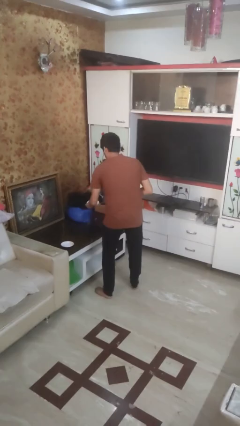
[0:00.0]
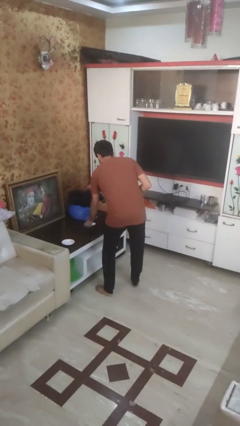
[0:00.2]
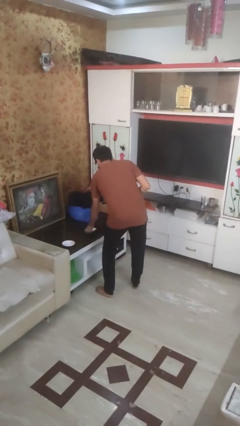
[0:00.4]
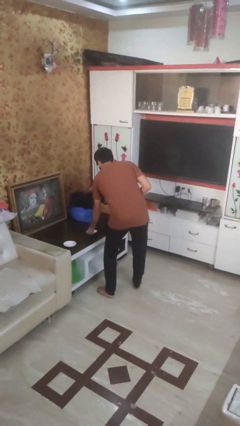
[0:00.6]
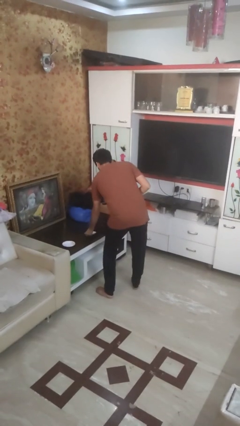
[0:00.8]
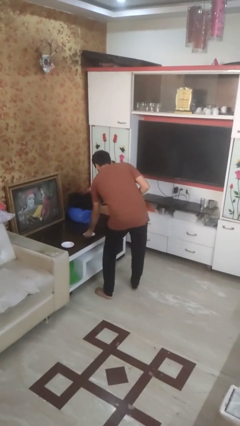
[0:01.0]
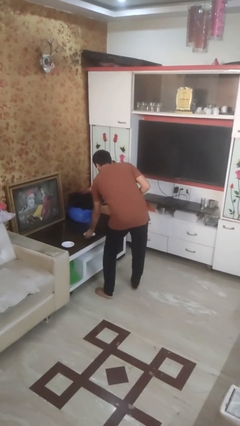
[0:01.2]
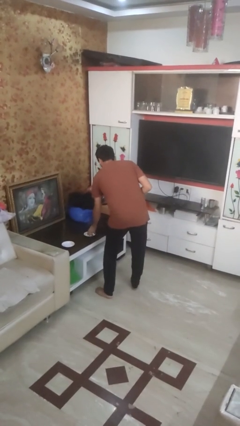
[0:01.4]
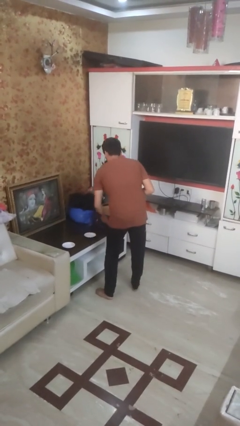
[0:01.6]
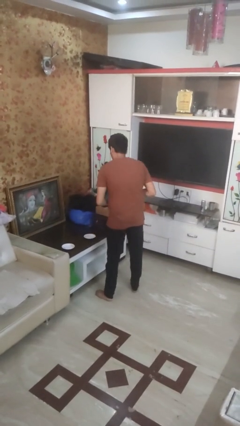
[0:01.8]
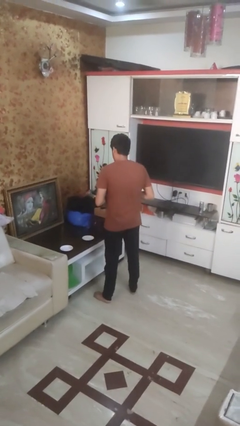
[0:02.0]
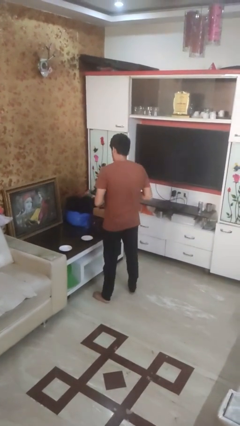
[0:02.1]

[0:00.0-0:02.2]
person sets table

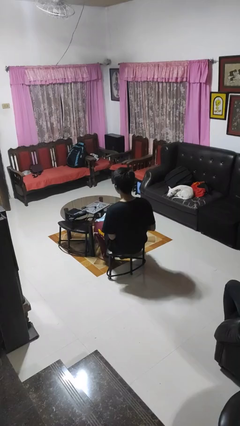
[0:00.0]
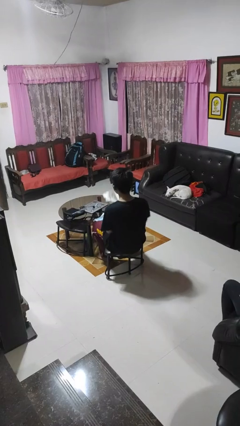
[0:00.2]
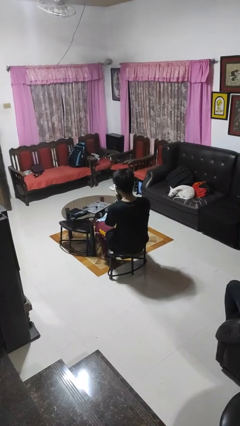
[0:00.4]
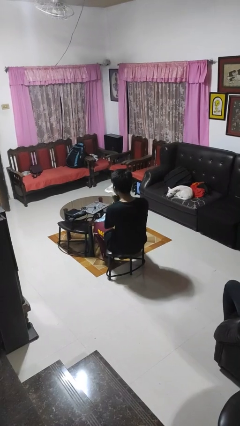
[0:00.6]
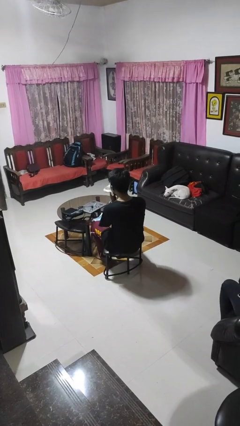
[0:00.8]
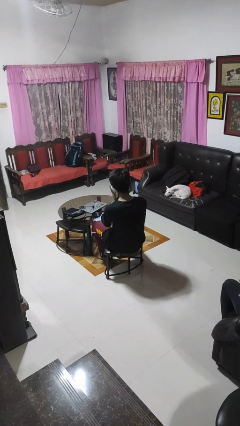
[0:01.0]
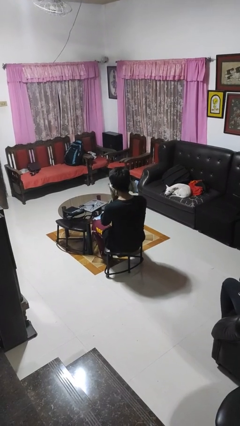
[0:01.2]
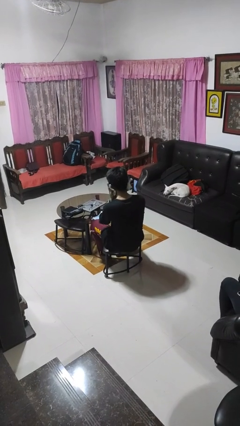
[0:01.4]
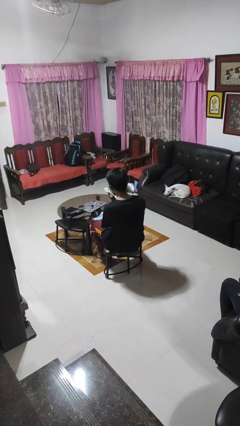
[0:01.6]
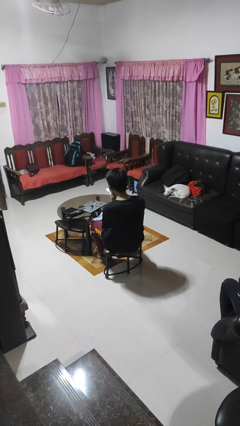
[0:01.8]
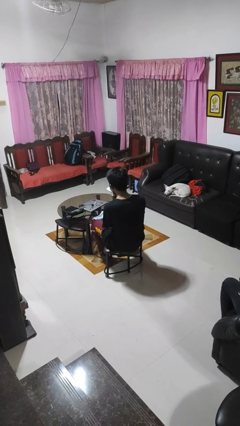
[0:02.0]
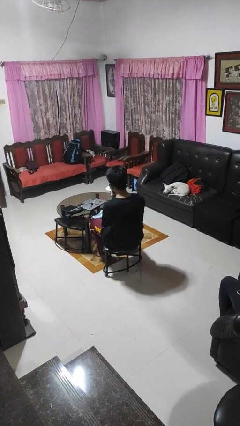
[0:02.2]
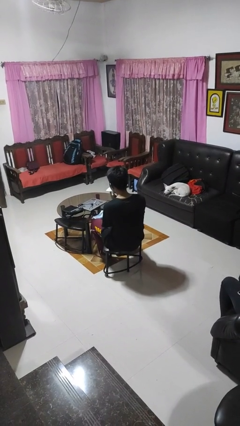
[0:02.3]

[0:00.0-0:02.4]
person wipes mouth with napkin

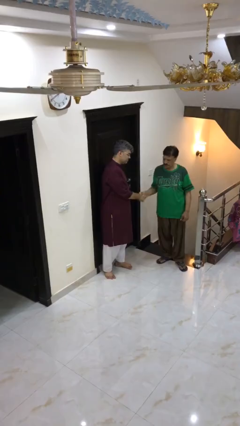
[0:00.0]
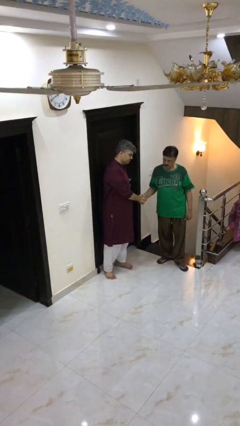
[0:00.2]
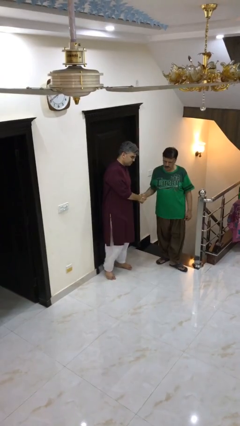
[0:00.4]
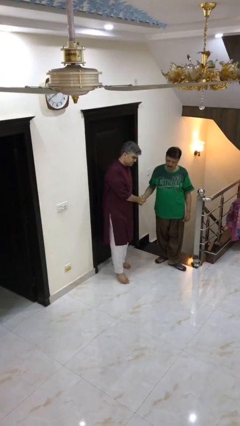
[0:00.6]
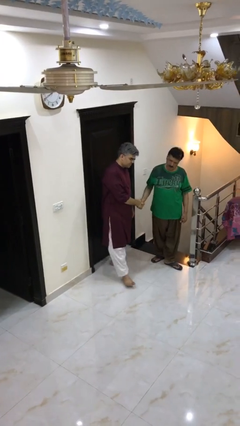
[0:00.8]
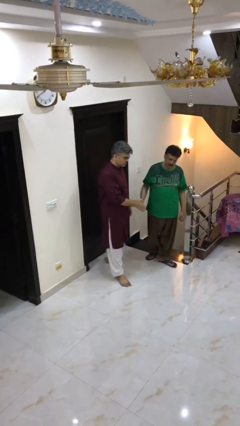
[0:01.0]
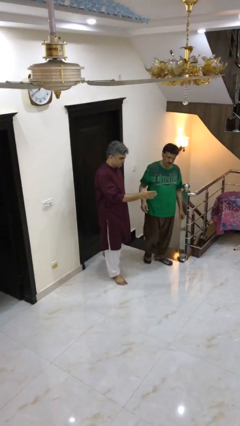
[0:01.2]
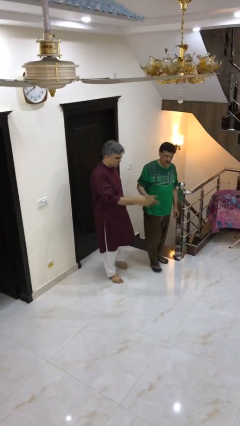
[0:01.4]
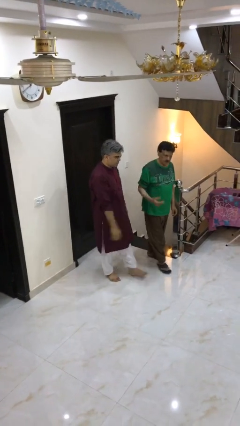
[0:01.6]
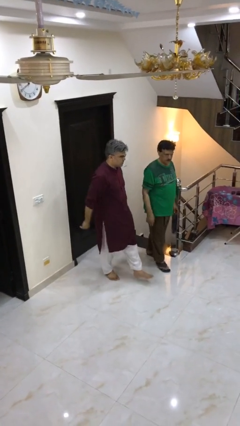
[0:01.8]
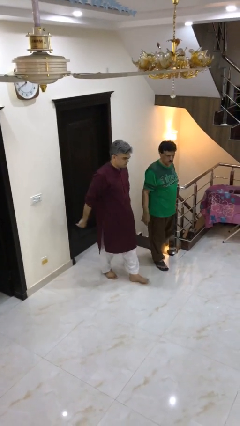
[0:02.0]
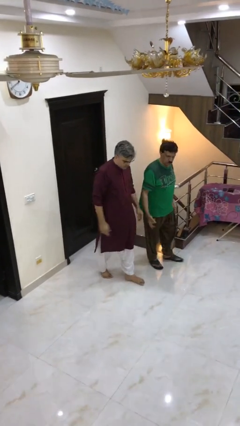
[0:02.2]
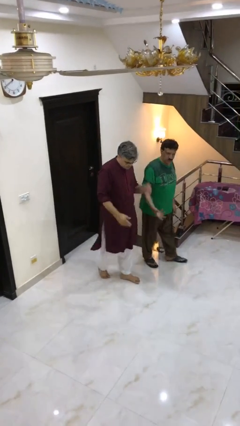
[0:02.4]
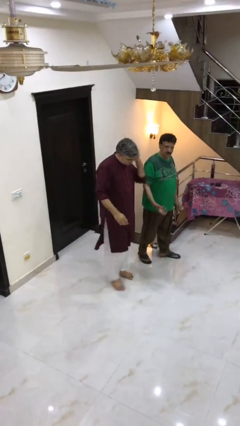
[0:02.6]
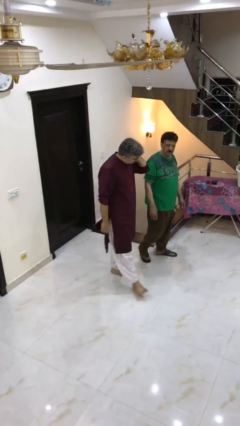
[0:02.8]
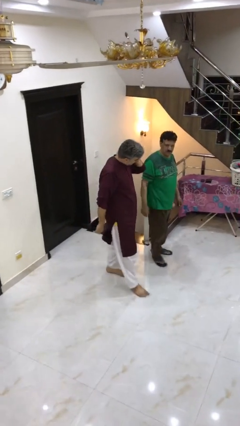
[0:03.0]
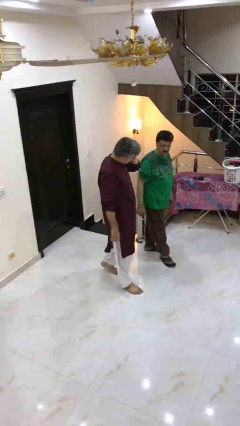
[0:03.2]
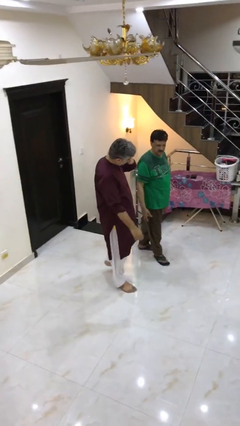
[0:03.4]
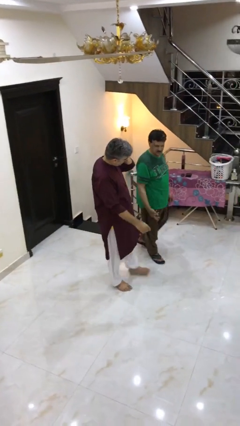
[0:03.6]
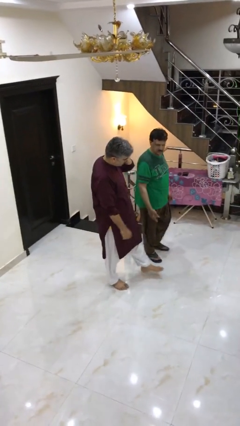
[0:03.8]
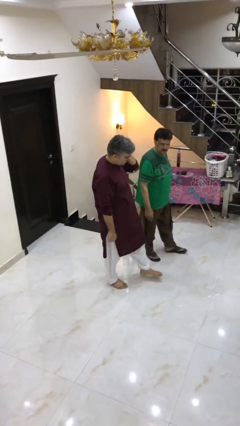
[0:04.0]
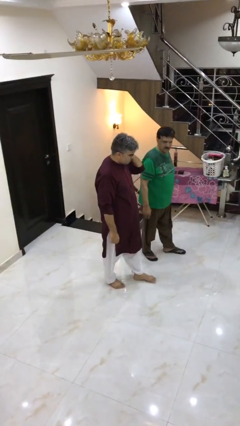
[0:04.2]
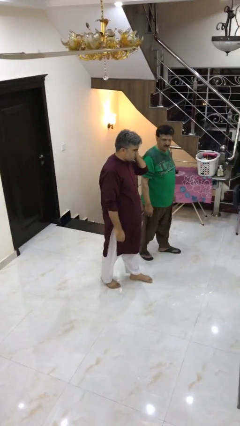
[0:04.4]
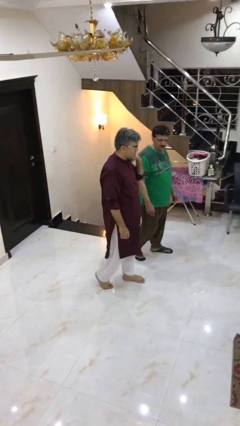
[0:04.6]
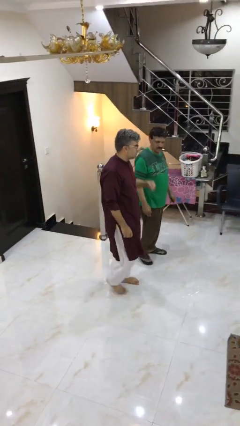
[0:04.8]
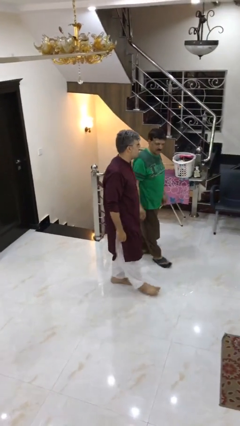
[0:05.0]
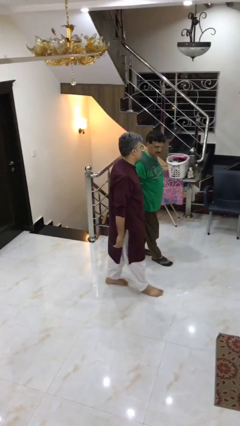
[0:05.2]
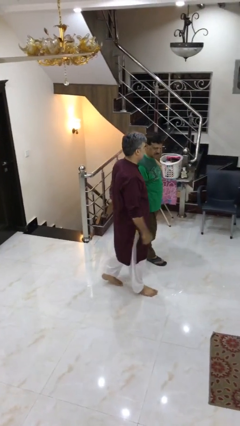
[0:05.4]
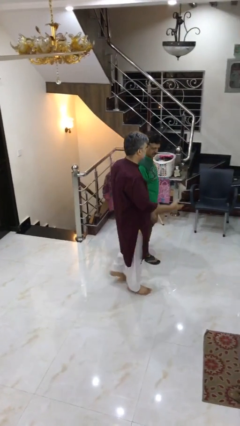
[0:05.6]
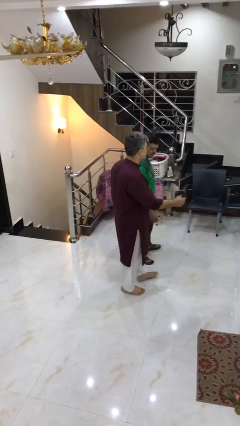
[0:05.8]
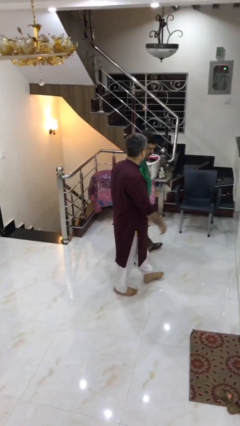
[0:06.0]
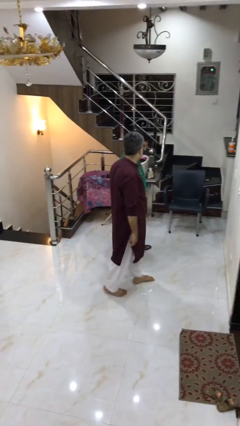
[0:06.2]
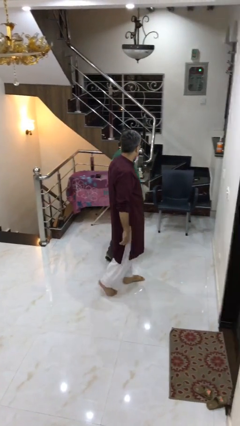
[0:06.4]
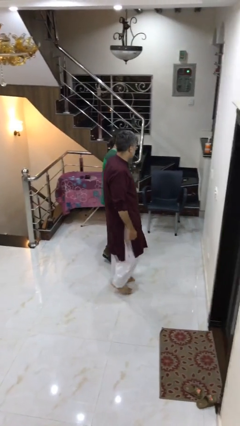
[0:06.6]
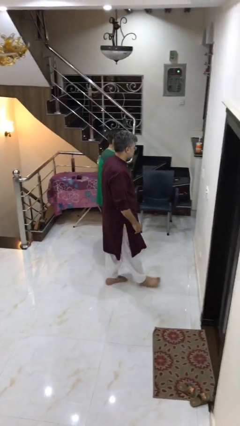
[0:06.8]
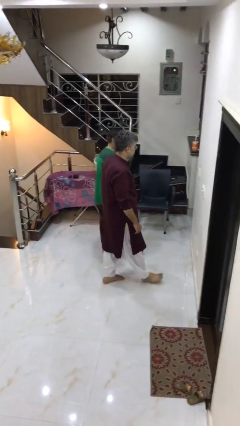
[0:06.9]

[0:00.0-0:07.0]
person talks to person

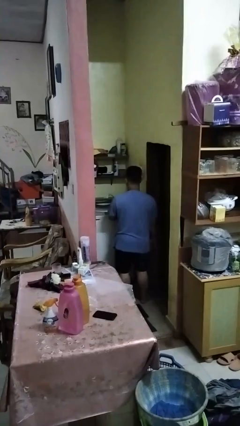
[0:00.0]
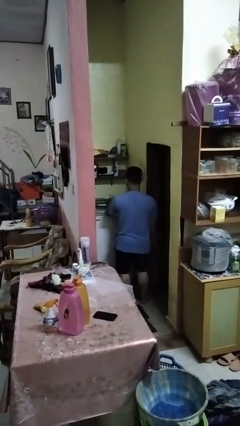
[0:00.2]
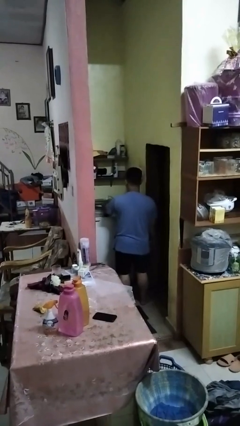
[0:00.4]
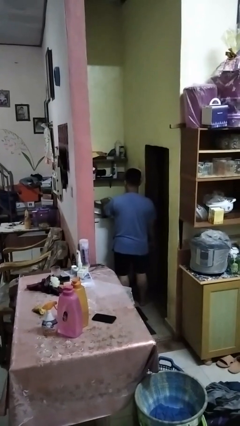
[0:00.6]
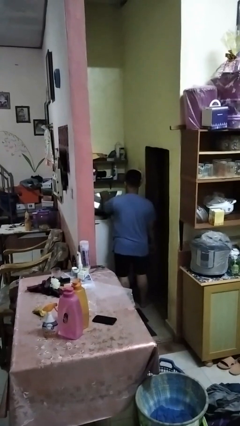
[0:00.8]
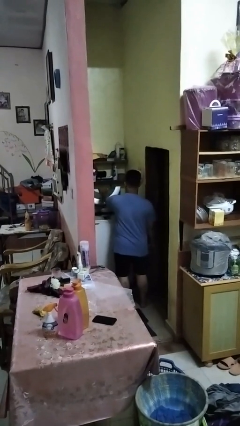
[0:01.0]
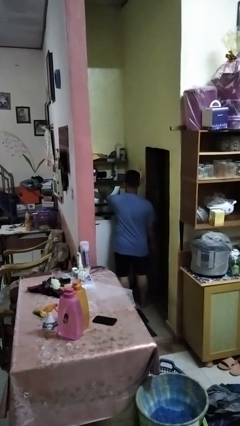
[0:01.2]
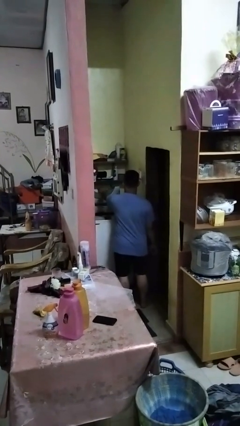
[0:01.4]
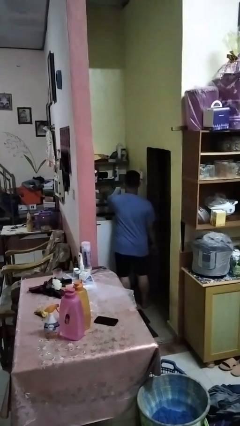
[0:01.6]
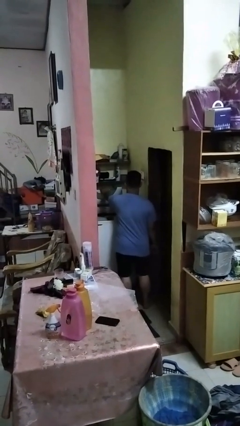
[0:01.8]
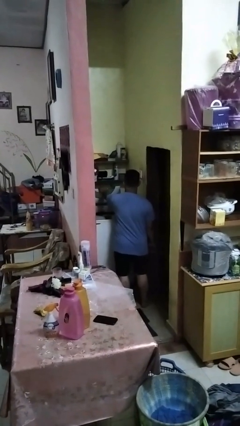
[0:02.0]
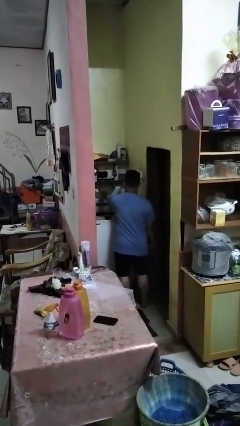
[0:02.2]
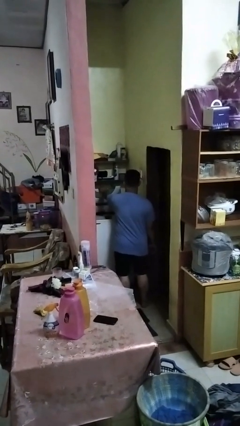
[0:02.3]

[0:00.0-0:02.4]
person opens clothes washer

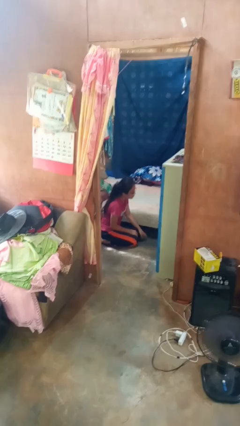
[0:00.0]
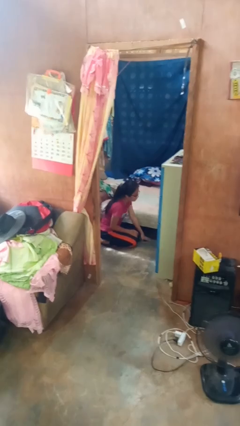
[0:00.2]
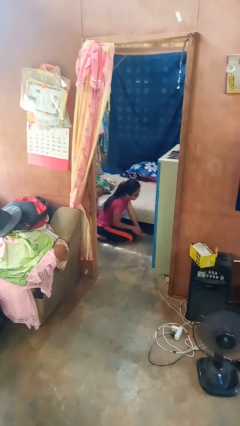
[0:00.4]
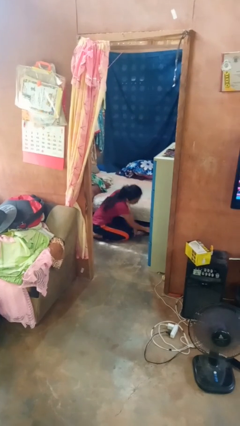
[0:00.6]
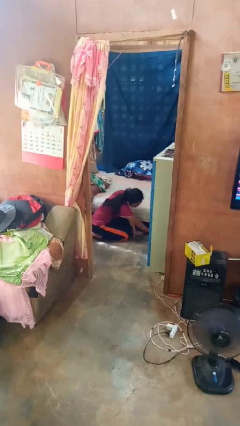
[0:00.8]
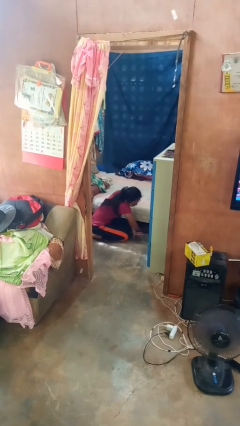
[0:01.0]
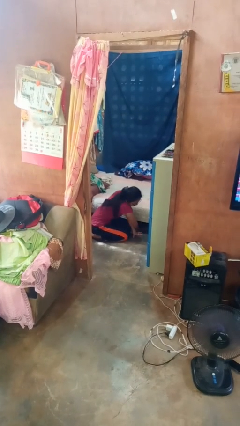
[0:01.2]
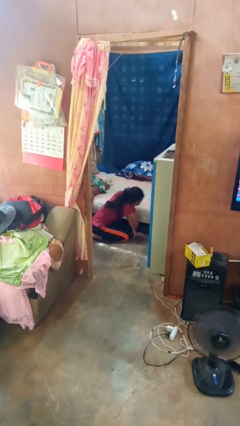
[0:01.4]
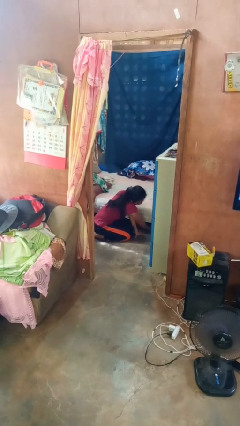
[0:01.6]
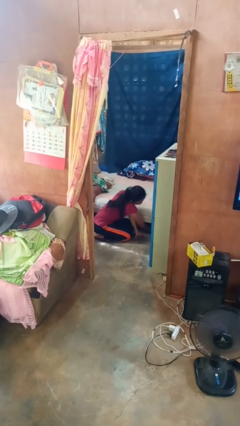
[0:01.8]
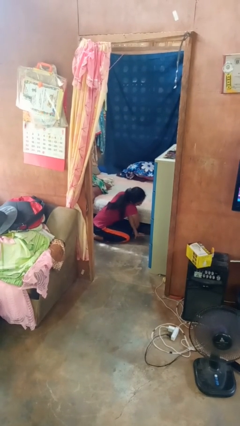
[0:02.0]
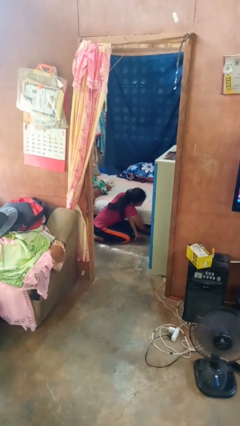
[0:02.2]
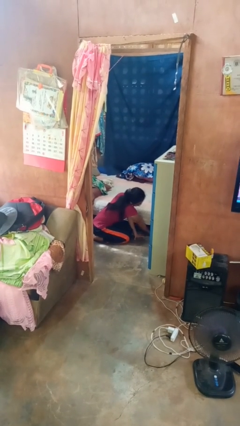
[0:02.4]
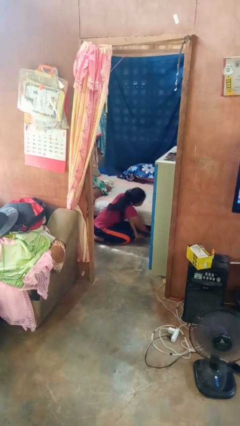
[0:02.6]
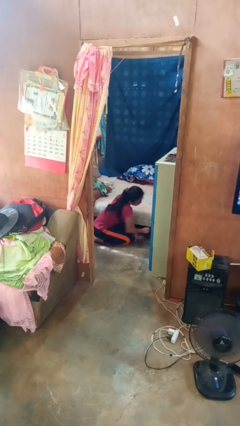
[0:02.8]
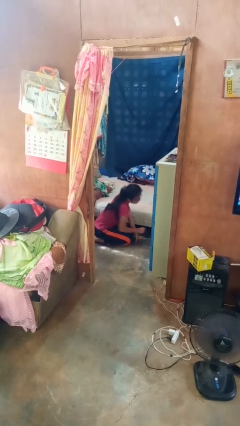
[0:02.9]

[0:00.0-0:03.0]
person searches under bed

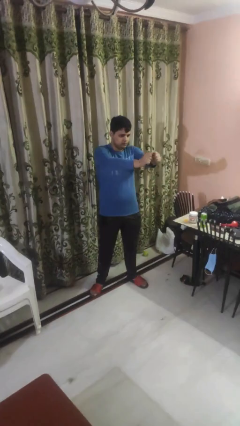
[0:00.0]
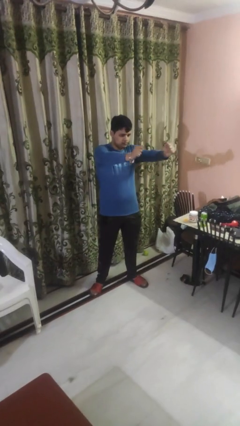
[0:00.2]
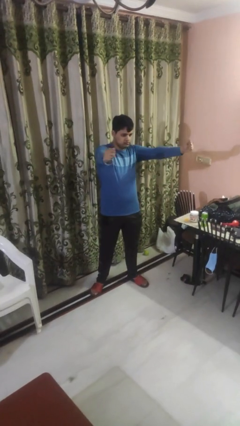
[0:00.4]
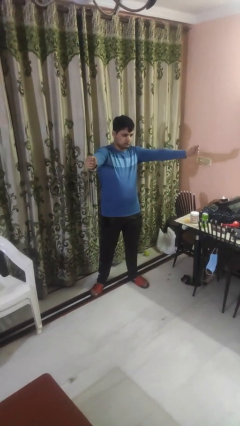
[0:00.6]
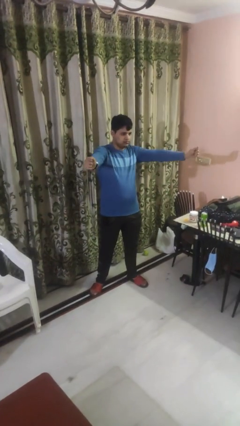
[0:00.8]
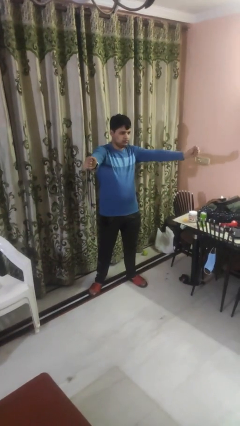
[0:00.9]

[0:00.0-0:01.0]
person gestures zoom in
